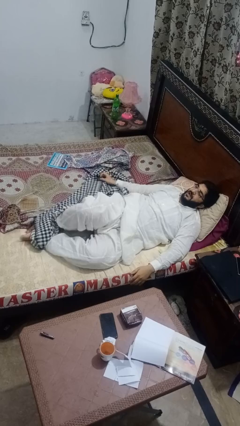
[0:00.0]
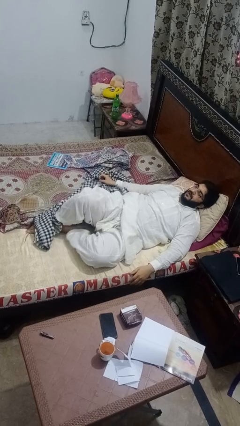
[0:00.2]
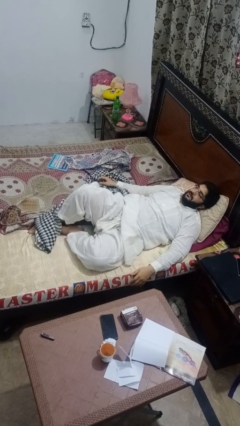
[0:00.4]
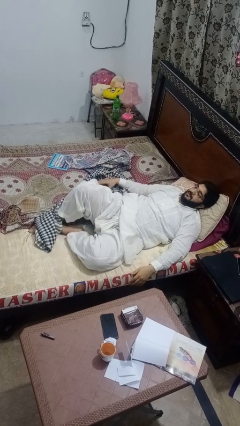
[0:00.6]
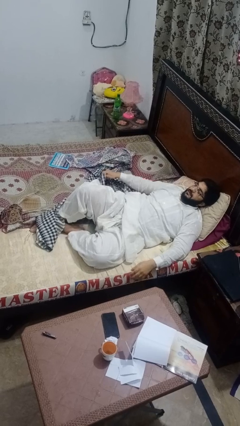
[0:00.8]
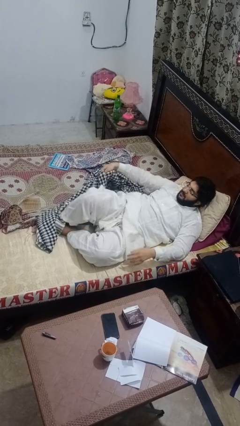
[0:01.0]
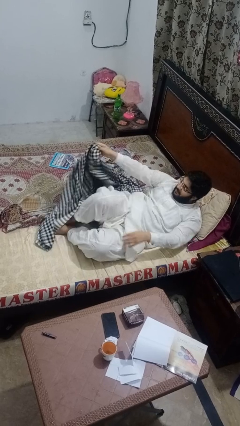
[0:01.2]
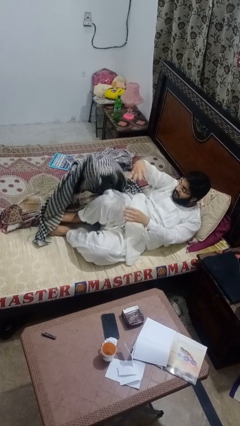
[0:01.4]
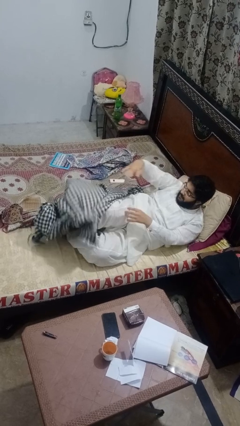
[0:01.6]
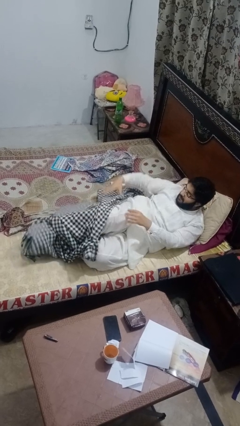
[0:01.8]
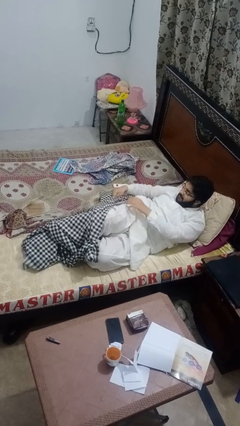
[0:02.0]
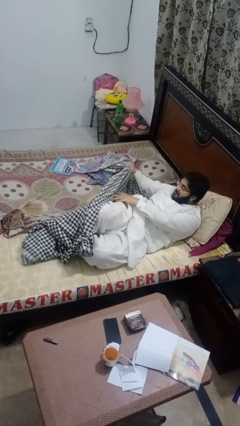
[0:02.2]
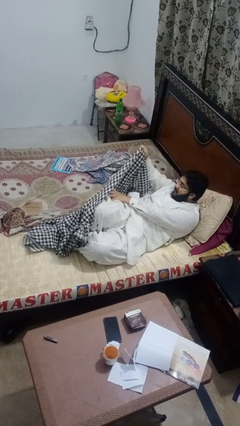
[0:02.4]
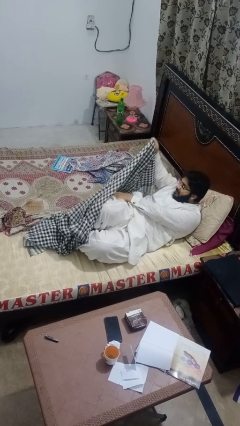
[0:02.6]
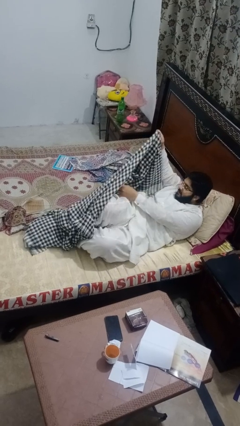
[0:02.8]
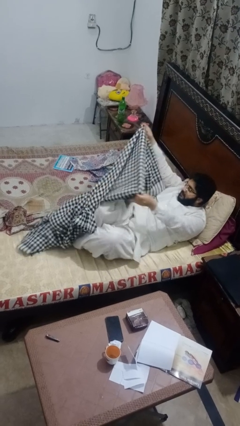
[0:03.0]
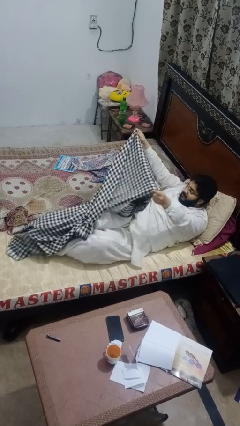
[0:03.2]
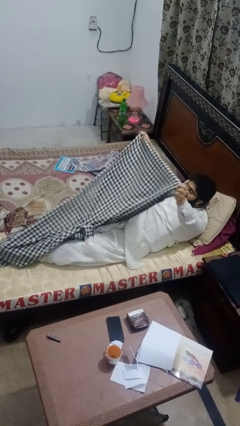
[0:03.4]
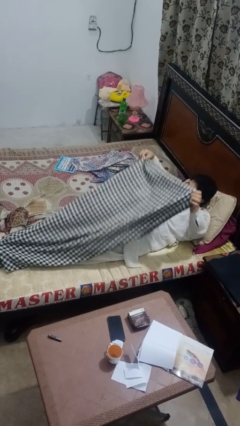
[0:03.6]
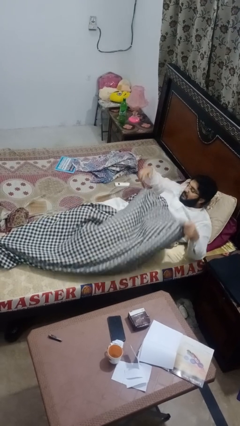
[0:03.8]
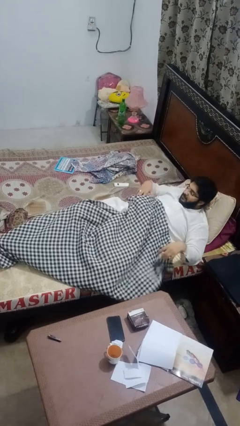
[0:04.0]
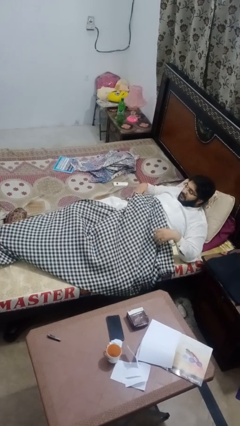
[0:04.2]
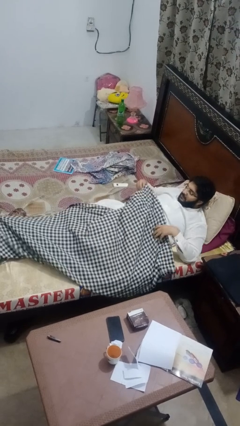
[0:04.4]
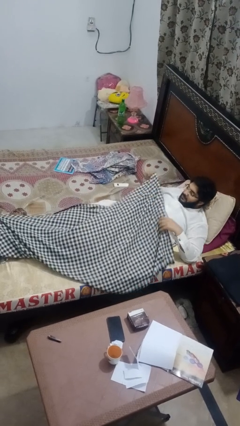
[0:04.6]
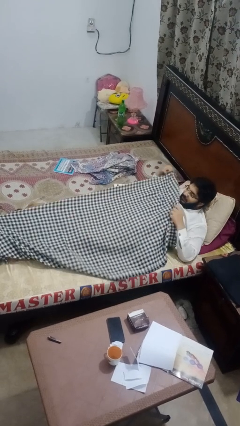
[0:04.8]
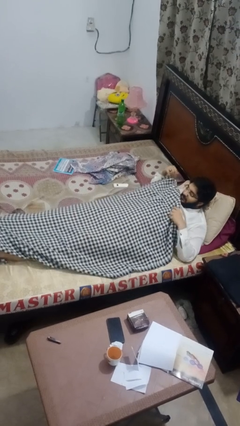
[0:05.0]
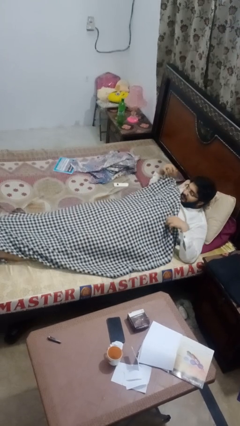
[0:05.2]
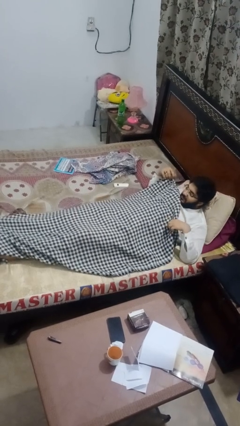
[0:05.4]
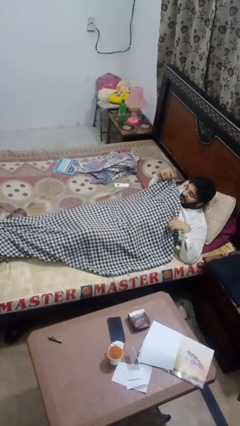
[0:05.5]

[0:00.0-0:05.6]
person covers with blanket

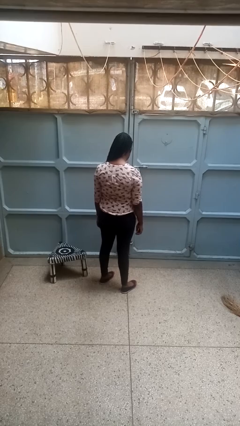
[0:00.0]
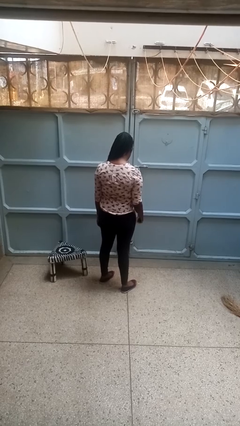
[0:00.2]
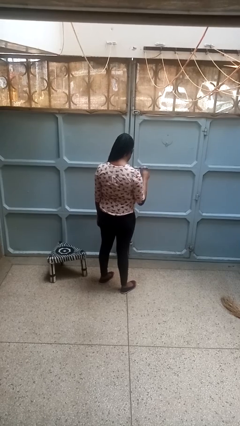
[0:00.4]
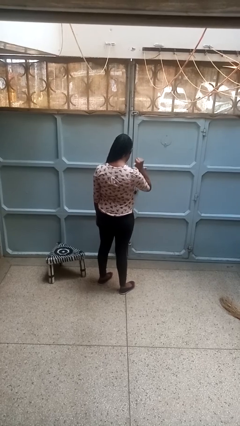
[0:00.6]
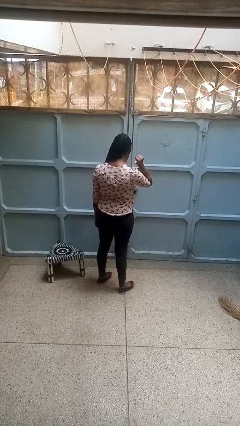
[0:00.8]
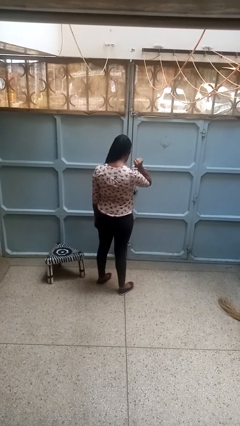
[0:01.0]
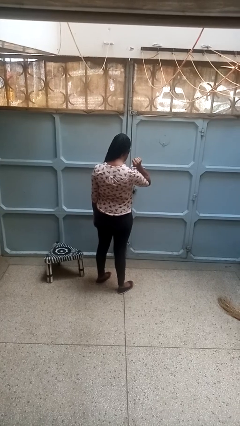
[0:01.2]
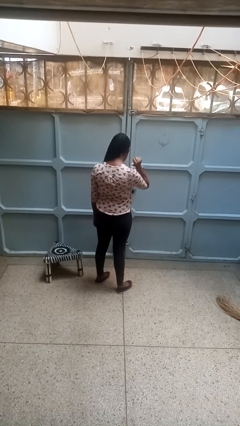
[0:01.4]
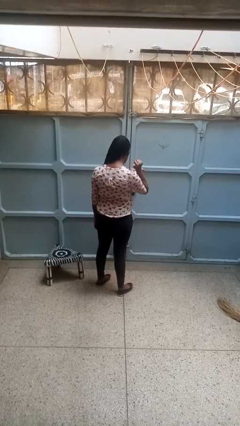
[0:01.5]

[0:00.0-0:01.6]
person gestures behind me

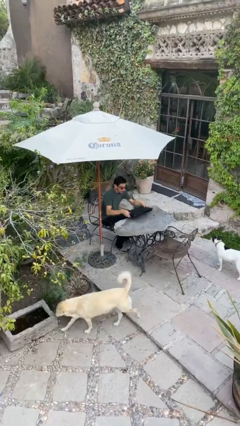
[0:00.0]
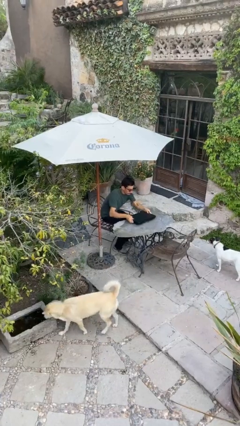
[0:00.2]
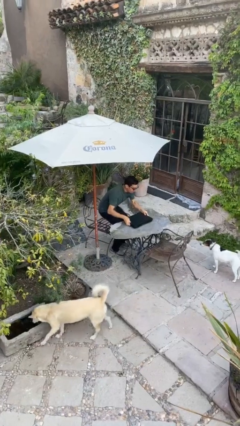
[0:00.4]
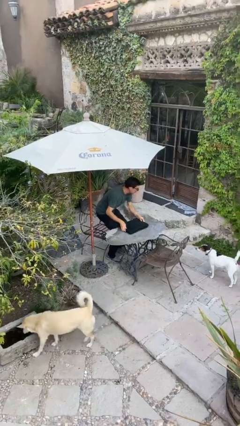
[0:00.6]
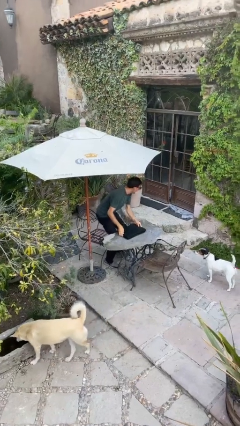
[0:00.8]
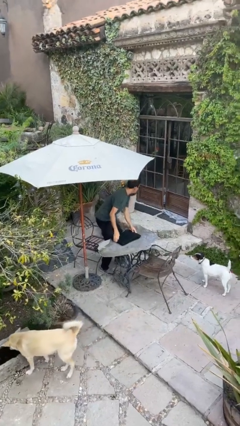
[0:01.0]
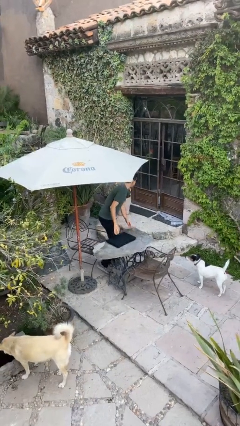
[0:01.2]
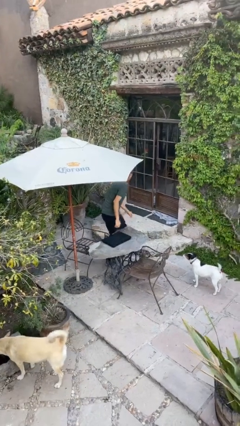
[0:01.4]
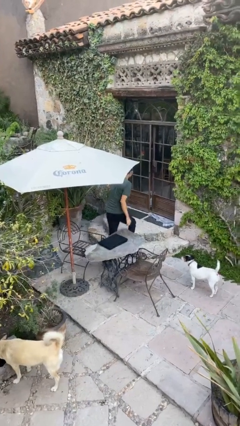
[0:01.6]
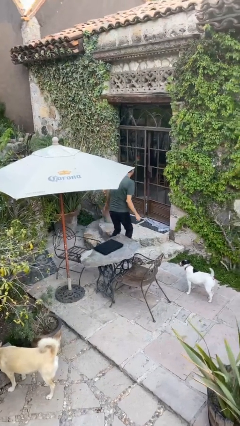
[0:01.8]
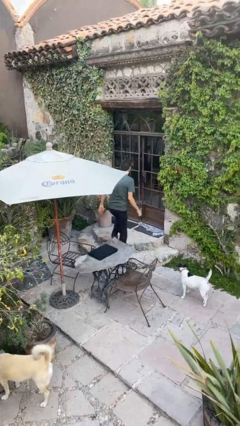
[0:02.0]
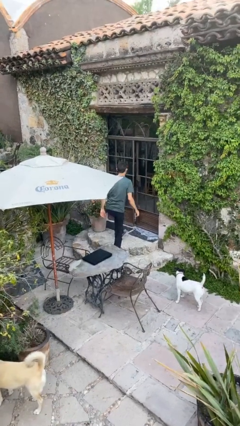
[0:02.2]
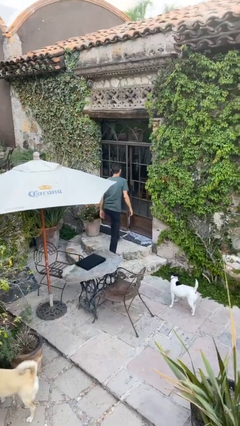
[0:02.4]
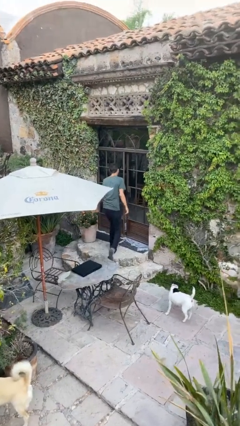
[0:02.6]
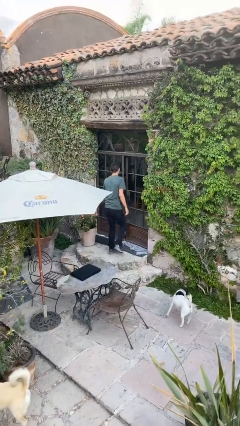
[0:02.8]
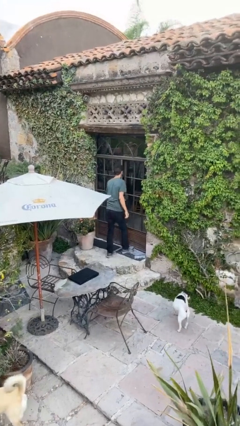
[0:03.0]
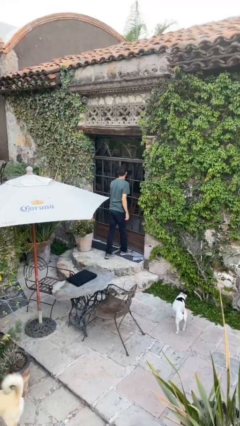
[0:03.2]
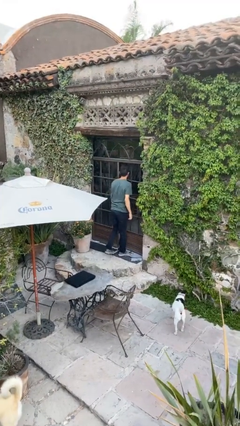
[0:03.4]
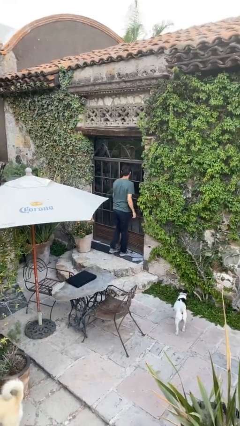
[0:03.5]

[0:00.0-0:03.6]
person stands up

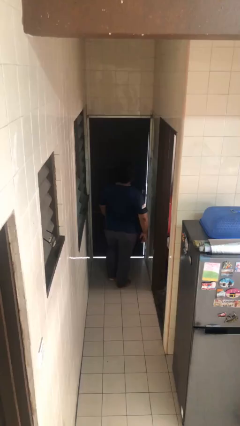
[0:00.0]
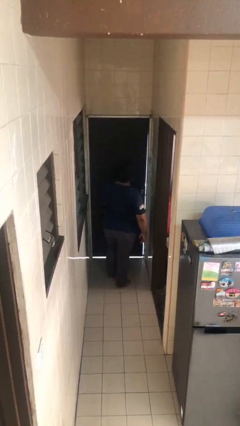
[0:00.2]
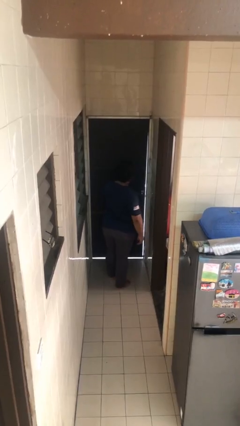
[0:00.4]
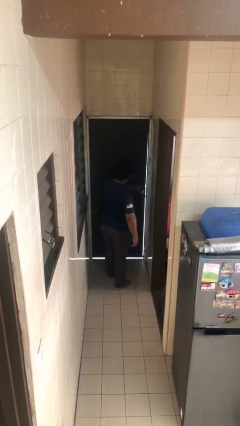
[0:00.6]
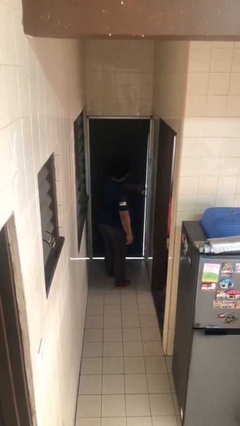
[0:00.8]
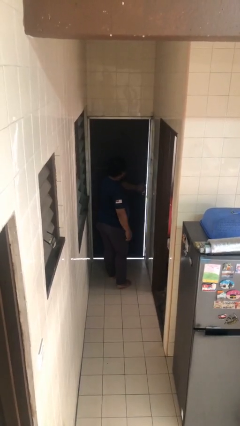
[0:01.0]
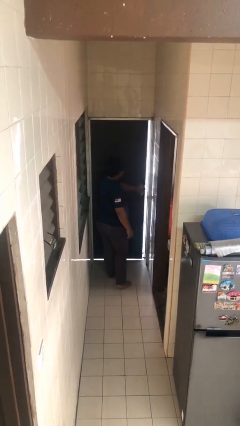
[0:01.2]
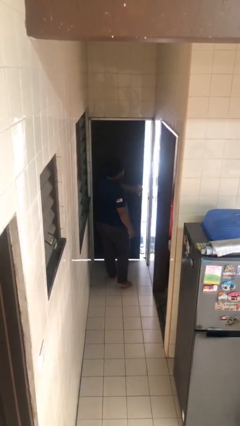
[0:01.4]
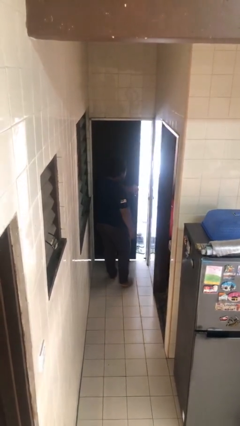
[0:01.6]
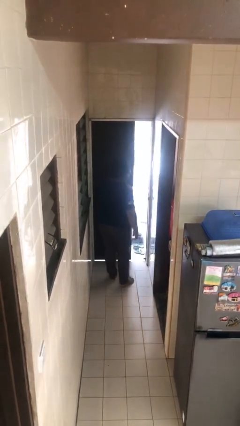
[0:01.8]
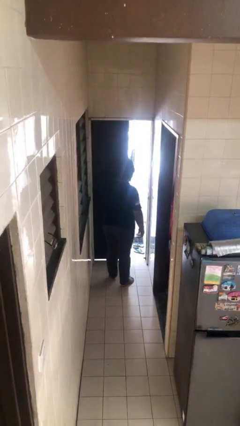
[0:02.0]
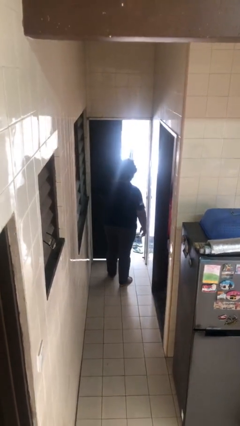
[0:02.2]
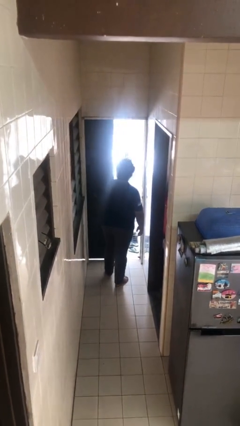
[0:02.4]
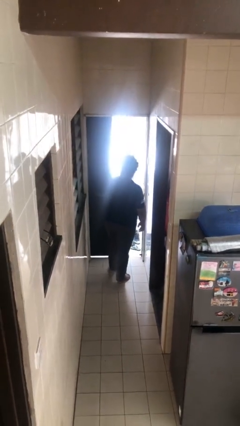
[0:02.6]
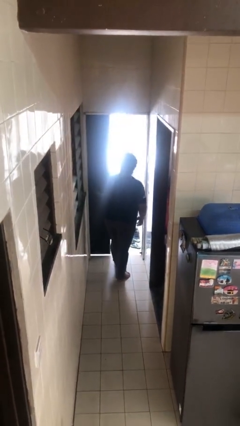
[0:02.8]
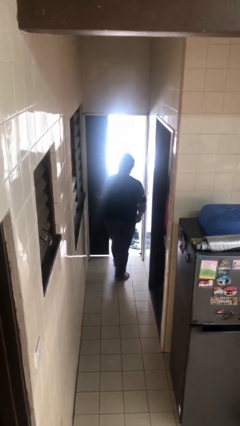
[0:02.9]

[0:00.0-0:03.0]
person opens facility door

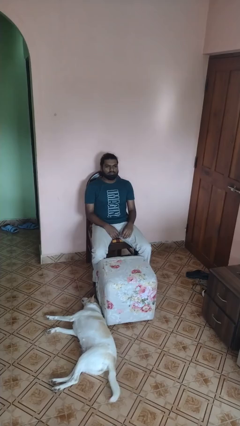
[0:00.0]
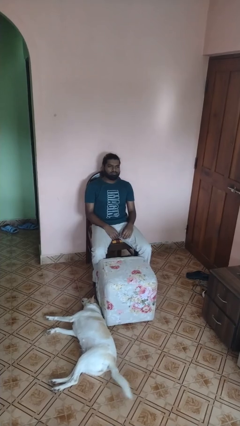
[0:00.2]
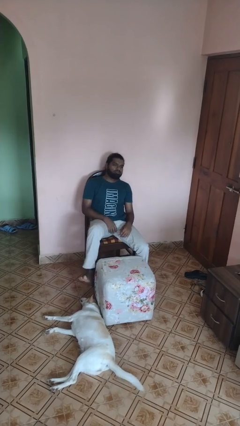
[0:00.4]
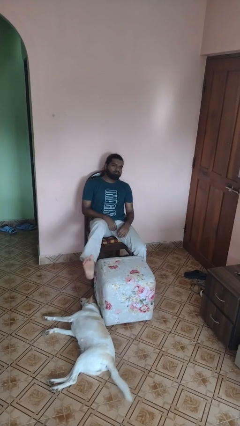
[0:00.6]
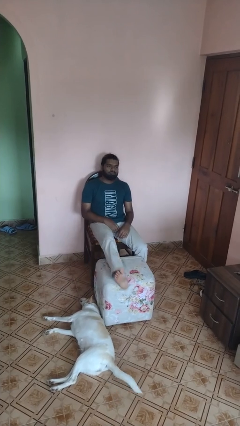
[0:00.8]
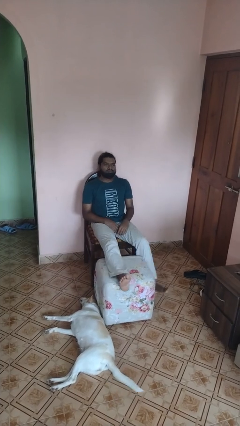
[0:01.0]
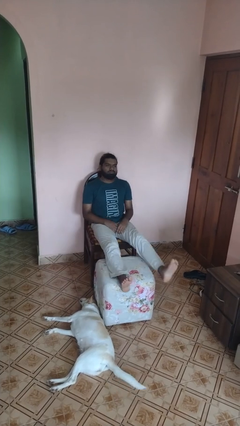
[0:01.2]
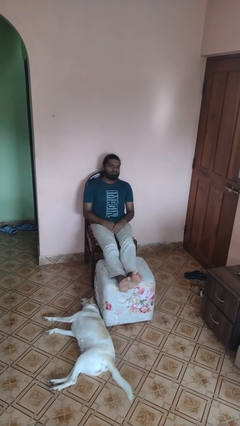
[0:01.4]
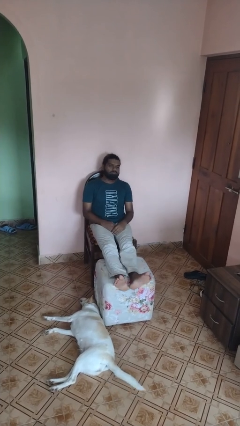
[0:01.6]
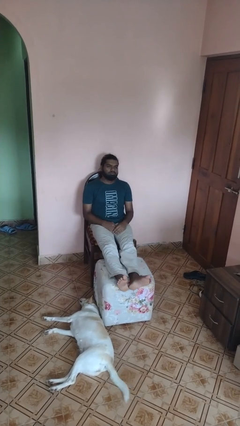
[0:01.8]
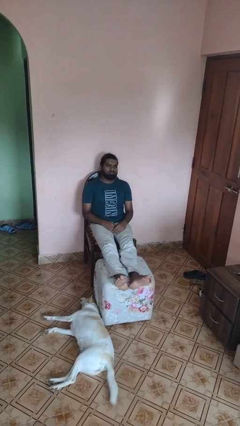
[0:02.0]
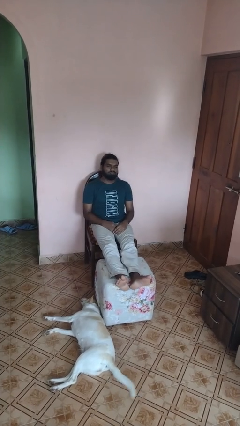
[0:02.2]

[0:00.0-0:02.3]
person puts feet up

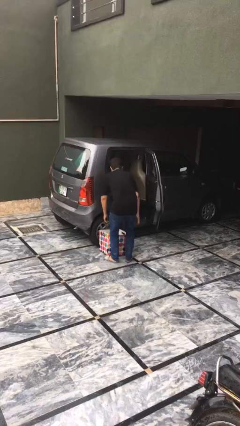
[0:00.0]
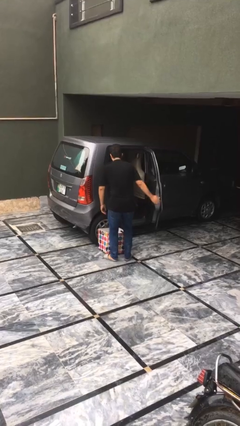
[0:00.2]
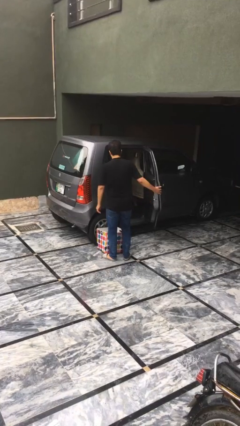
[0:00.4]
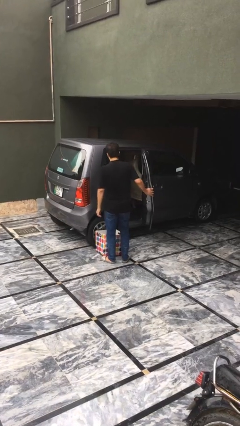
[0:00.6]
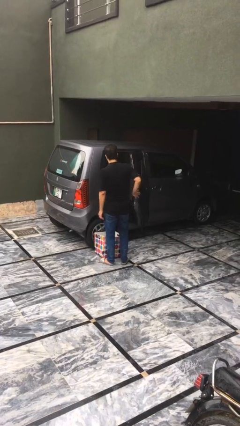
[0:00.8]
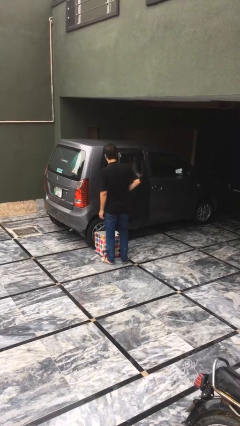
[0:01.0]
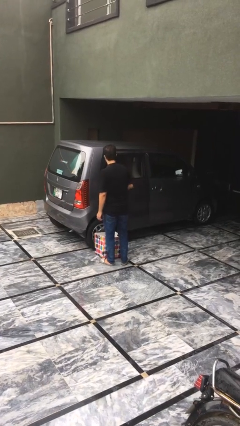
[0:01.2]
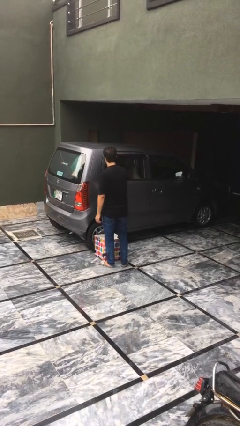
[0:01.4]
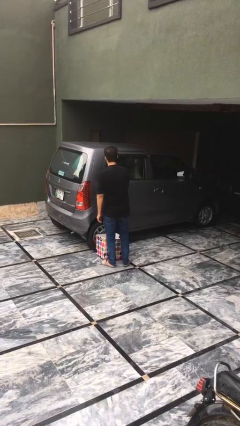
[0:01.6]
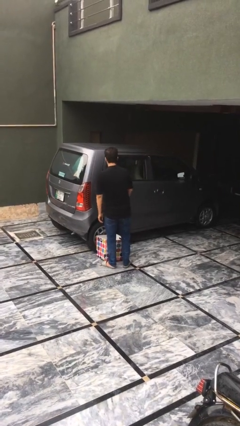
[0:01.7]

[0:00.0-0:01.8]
person closes car door
